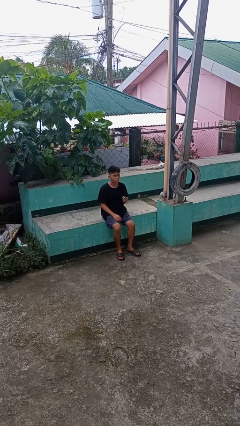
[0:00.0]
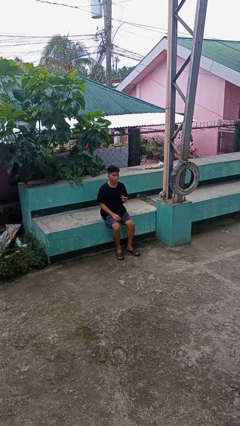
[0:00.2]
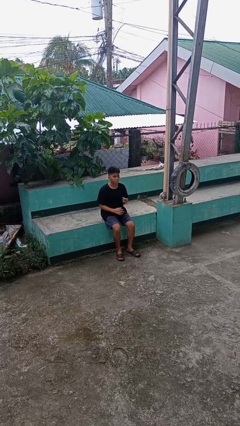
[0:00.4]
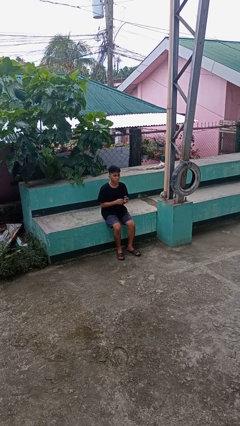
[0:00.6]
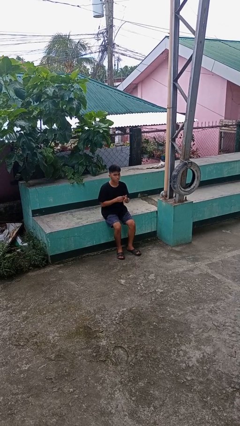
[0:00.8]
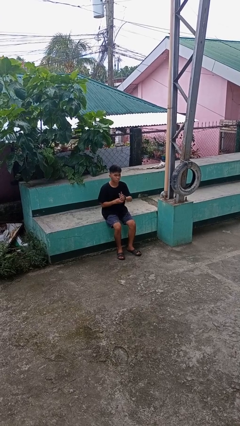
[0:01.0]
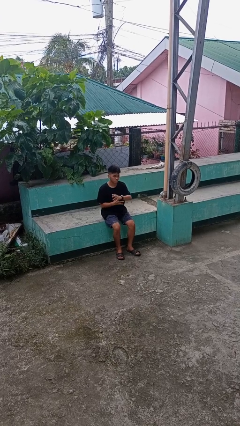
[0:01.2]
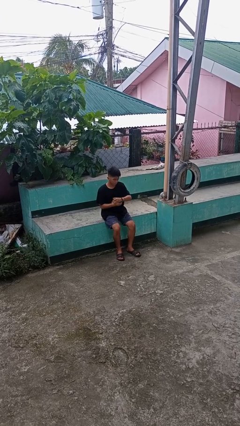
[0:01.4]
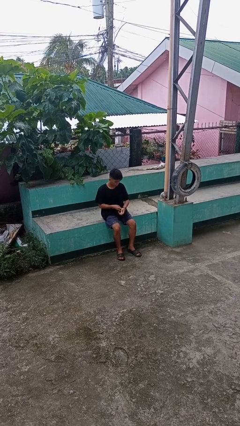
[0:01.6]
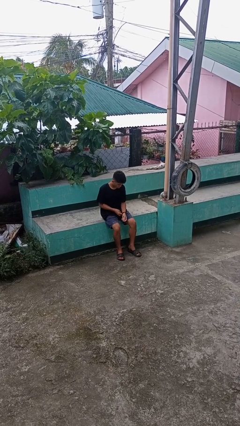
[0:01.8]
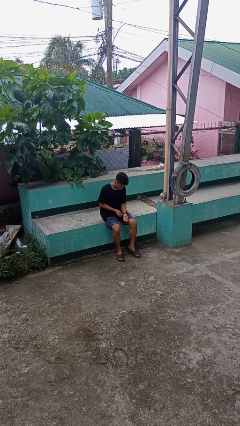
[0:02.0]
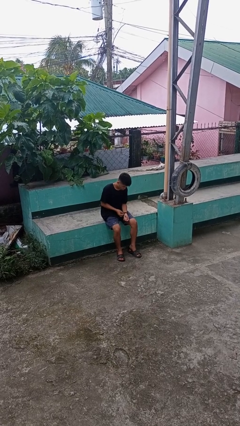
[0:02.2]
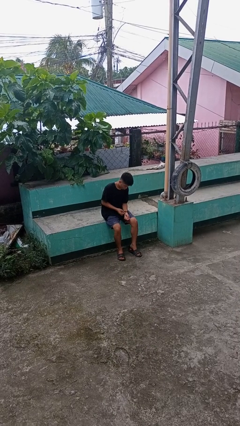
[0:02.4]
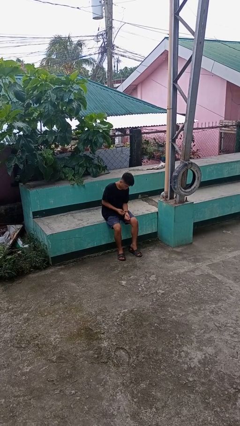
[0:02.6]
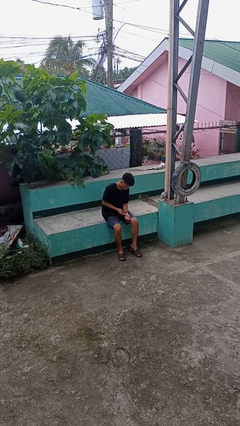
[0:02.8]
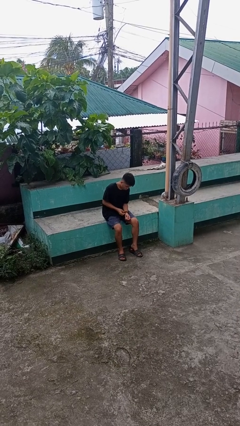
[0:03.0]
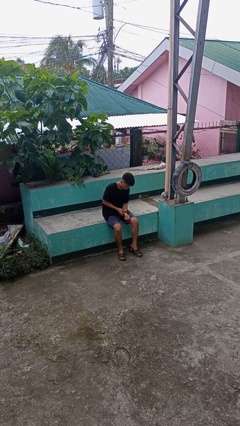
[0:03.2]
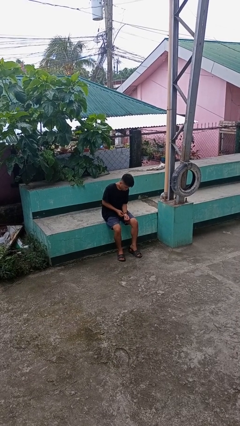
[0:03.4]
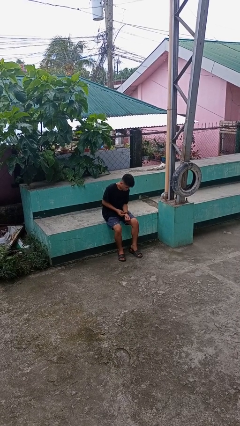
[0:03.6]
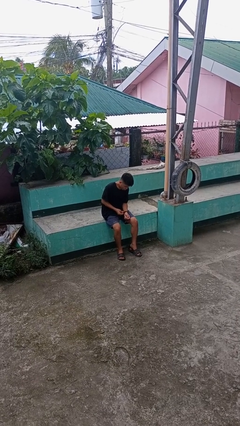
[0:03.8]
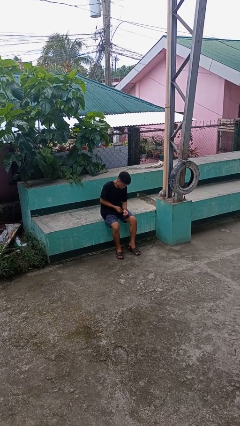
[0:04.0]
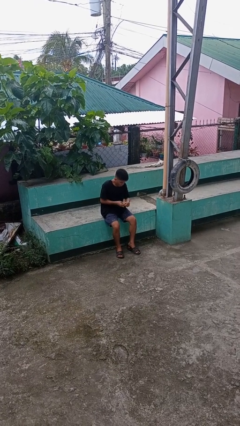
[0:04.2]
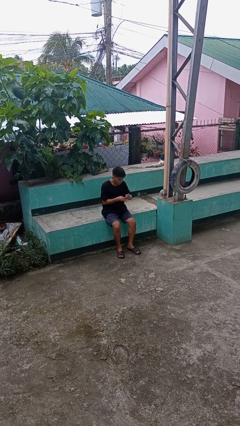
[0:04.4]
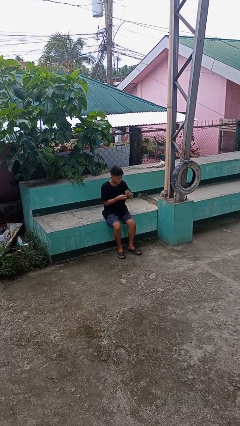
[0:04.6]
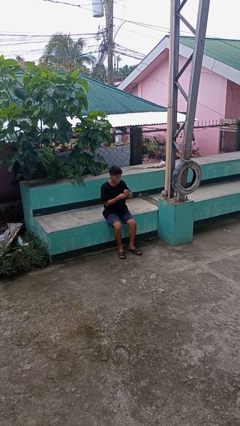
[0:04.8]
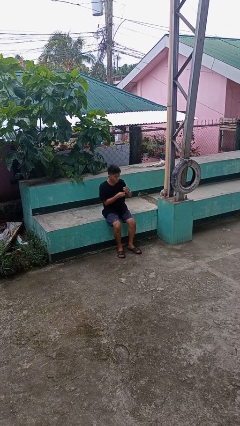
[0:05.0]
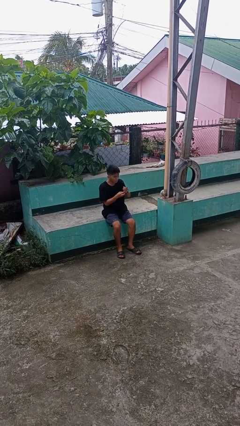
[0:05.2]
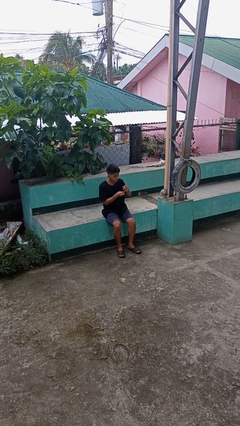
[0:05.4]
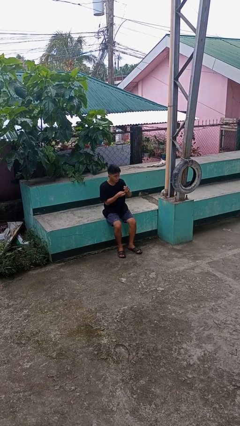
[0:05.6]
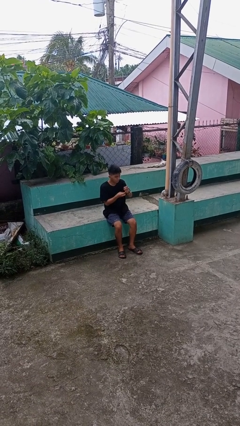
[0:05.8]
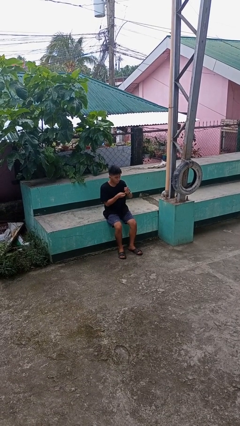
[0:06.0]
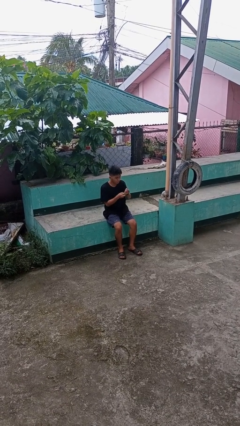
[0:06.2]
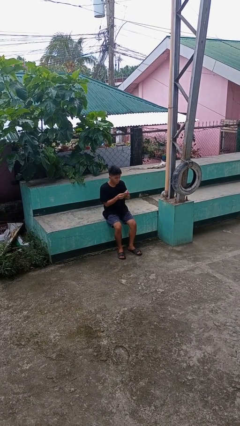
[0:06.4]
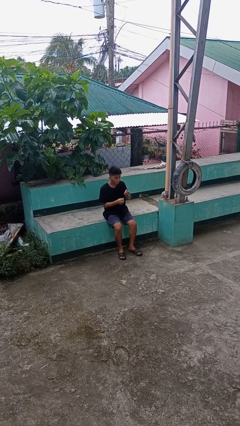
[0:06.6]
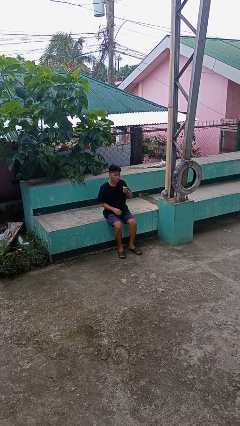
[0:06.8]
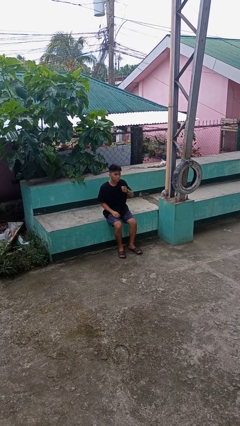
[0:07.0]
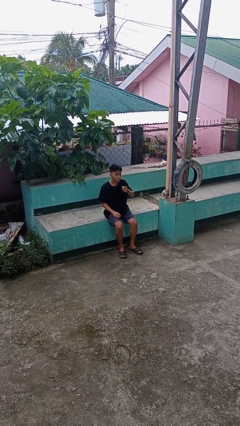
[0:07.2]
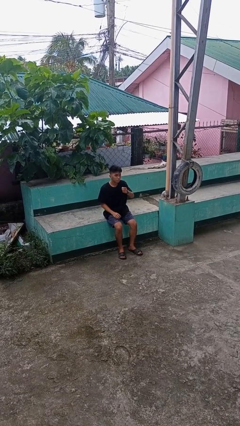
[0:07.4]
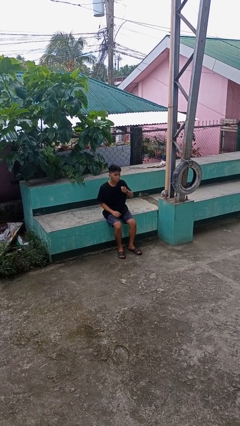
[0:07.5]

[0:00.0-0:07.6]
person puts on wristwatch

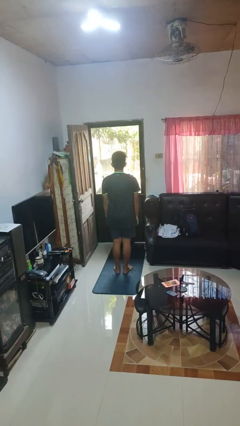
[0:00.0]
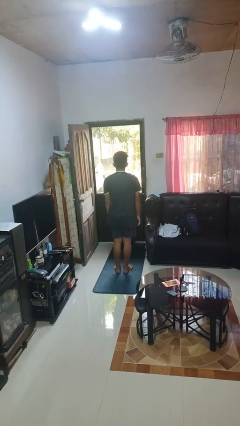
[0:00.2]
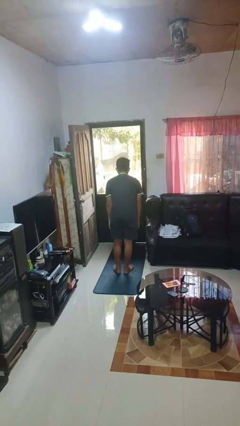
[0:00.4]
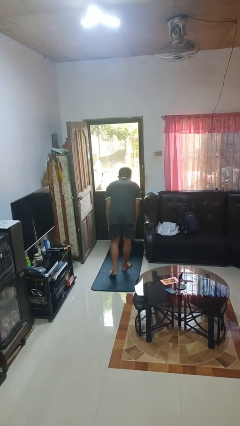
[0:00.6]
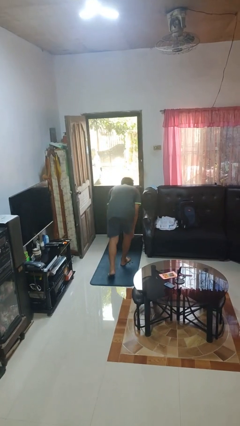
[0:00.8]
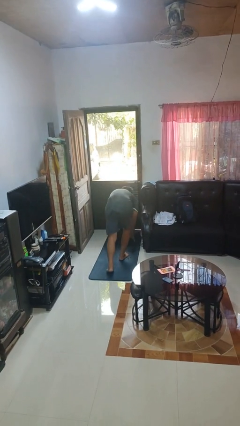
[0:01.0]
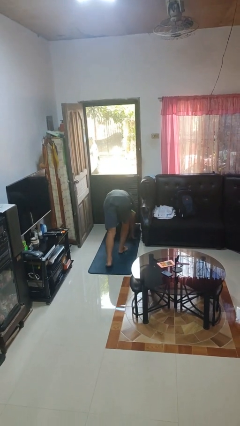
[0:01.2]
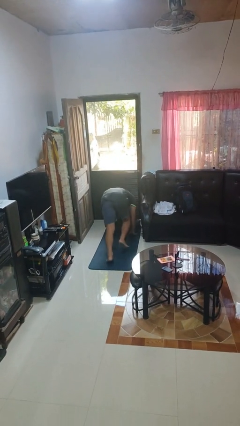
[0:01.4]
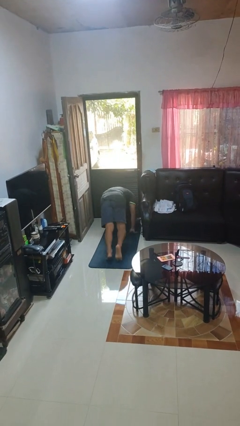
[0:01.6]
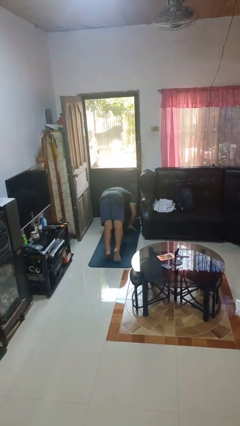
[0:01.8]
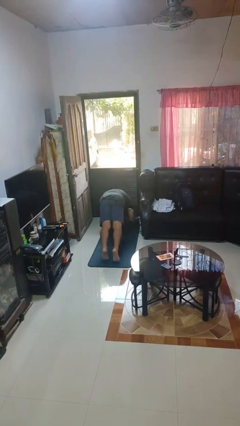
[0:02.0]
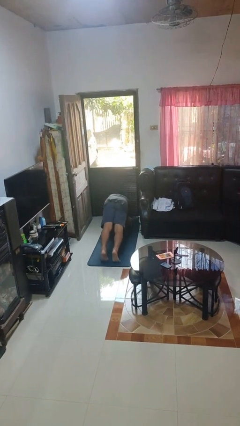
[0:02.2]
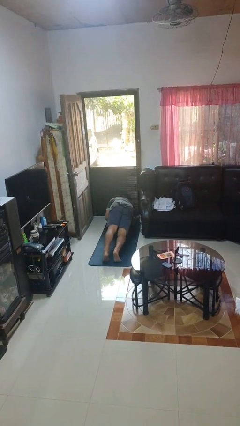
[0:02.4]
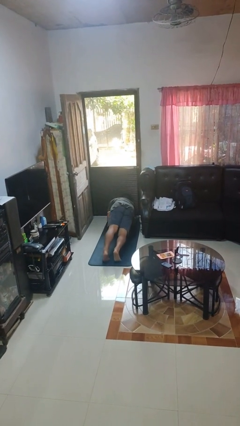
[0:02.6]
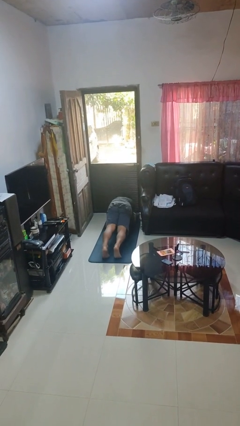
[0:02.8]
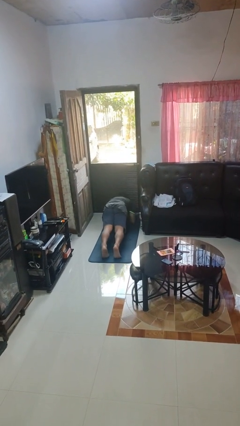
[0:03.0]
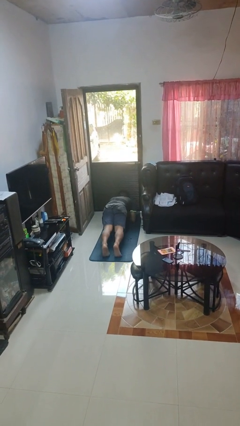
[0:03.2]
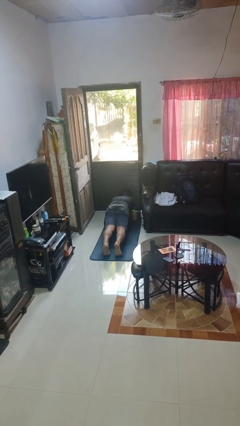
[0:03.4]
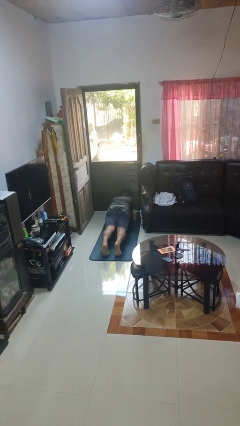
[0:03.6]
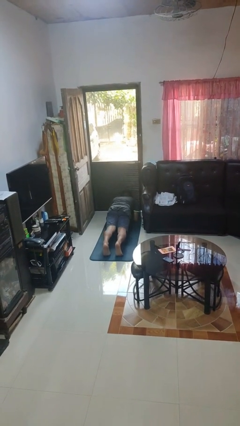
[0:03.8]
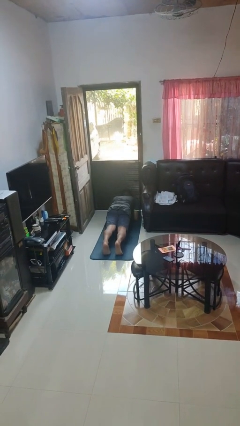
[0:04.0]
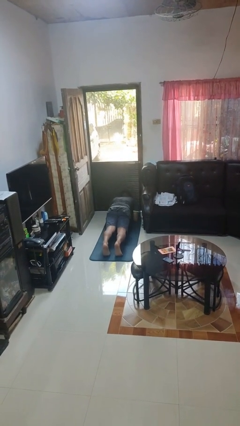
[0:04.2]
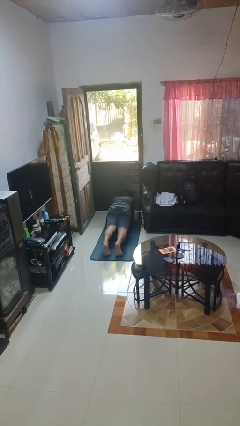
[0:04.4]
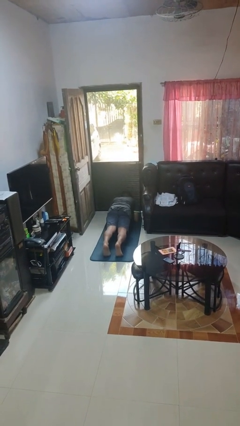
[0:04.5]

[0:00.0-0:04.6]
person exercises with plank

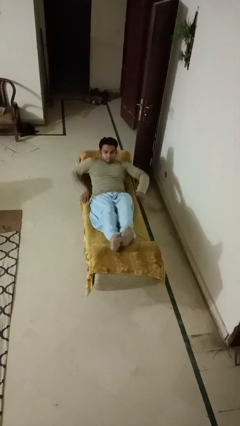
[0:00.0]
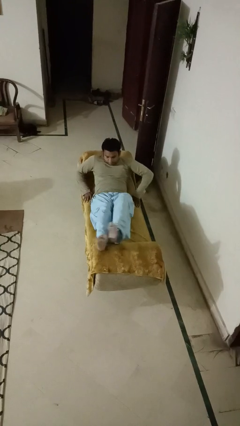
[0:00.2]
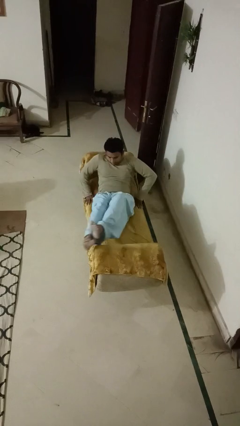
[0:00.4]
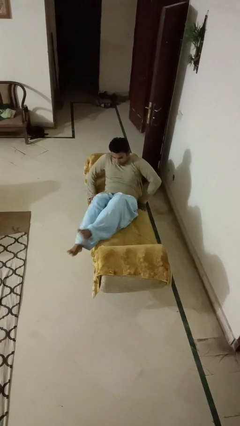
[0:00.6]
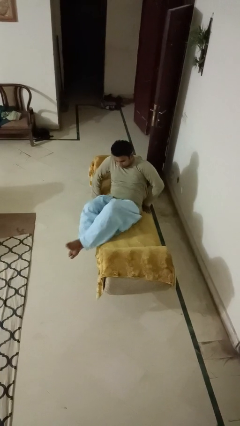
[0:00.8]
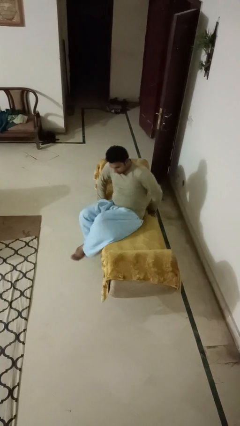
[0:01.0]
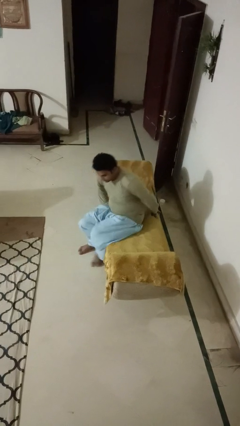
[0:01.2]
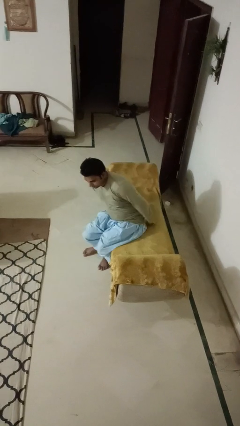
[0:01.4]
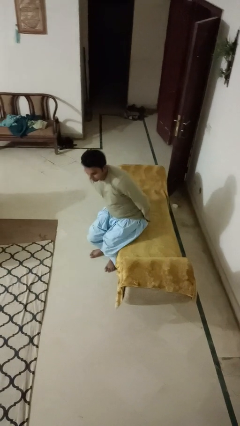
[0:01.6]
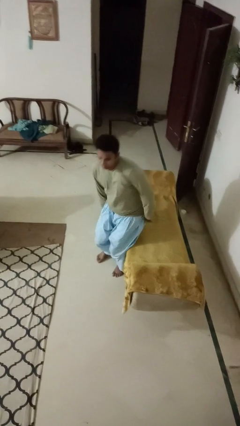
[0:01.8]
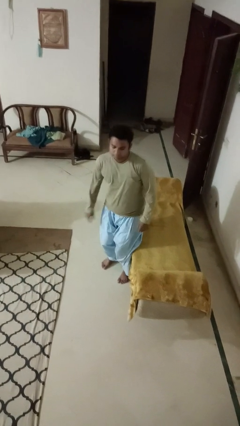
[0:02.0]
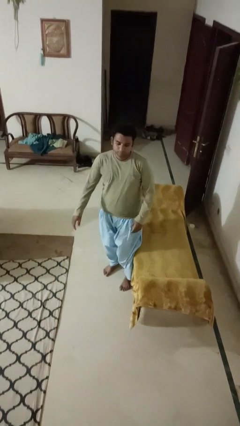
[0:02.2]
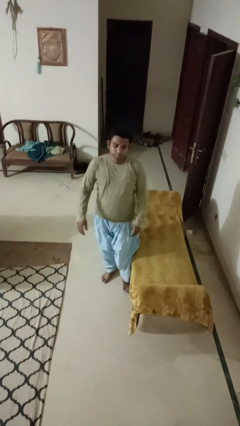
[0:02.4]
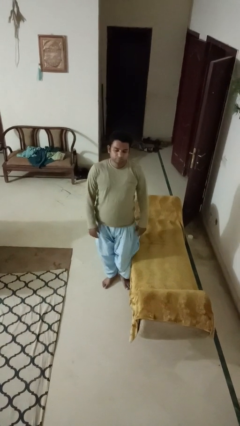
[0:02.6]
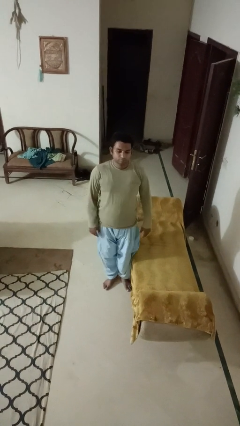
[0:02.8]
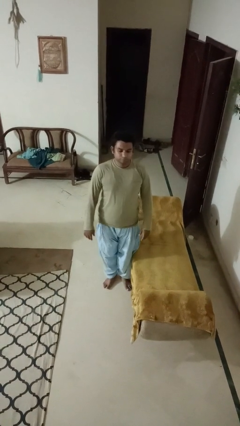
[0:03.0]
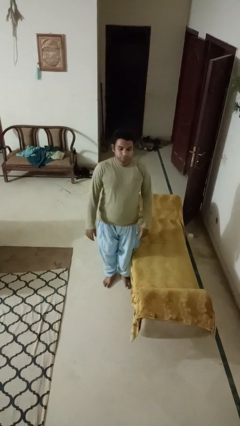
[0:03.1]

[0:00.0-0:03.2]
person stands up

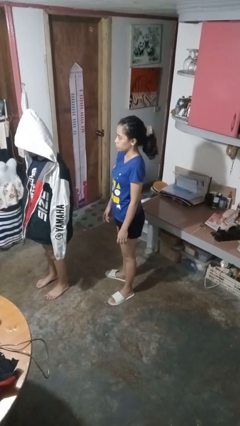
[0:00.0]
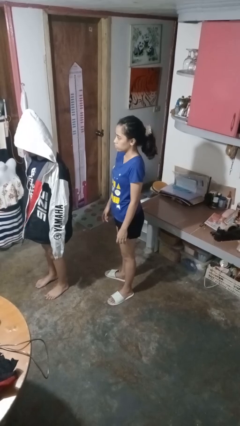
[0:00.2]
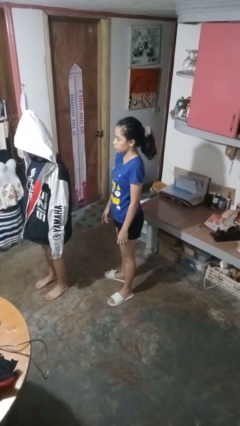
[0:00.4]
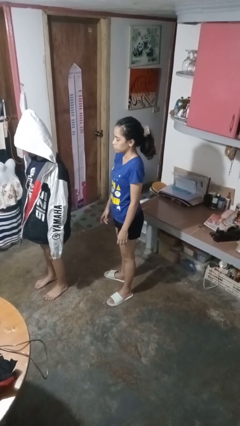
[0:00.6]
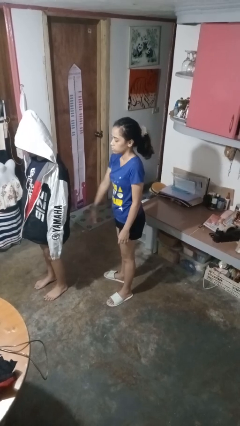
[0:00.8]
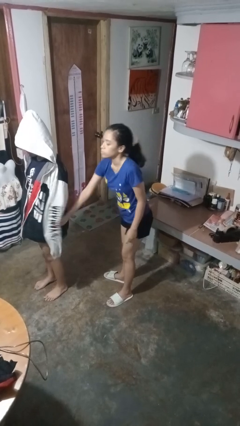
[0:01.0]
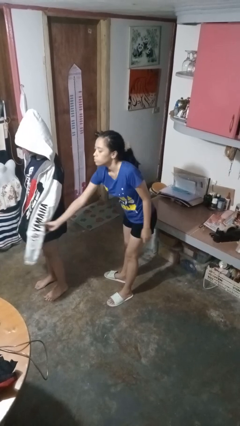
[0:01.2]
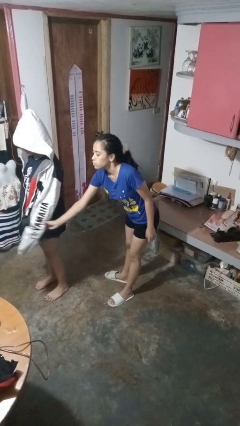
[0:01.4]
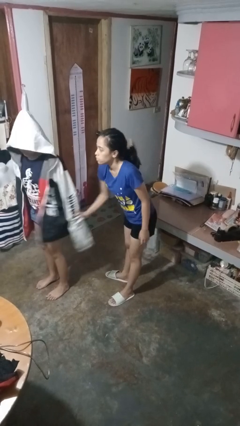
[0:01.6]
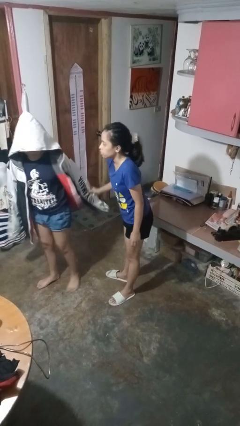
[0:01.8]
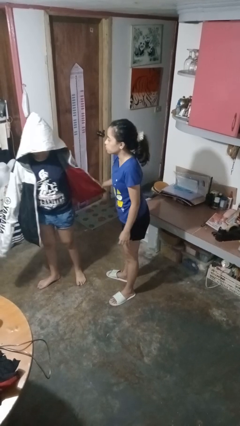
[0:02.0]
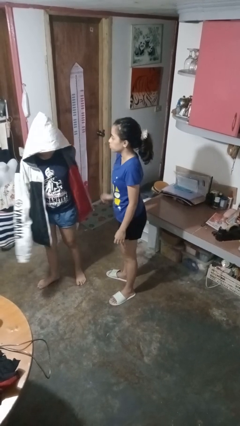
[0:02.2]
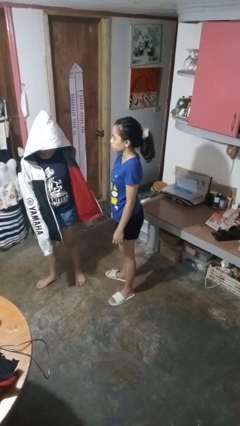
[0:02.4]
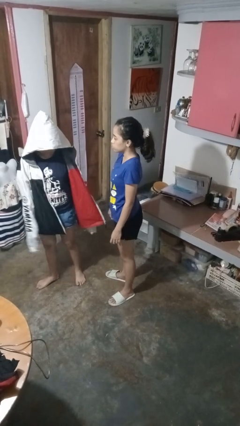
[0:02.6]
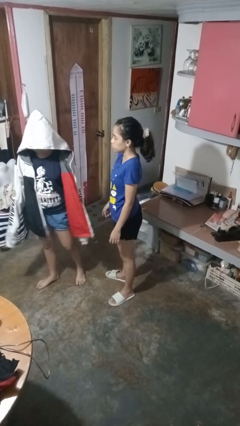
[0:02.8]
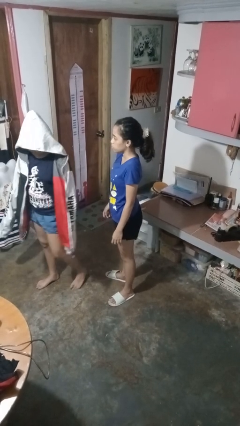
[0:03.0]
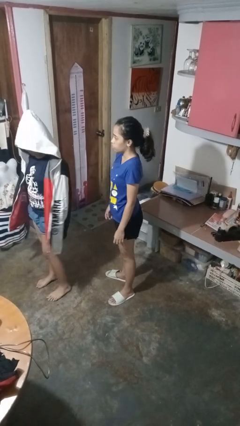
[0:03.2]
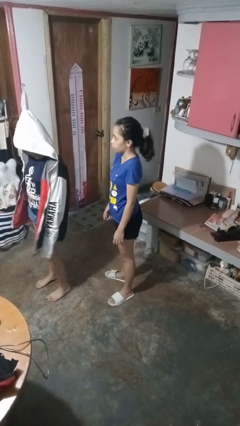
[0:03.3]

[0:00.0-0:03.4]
person grabs person by forearm
